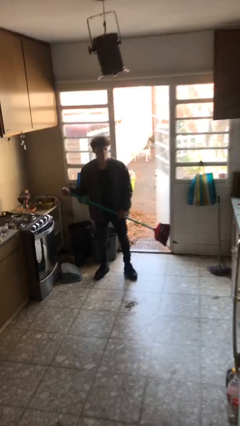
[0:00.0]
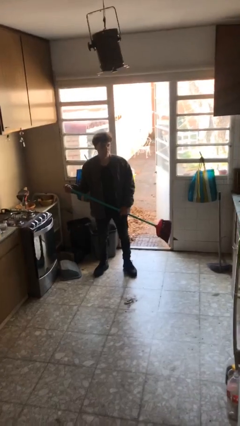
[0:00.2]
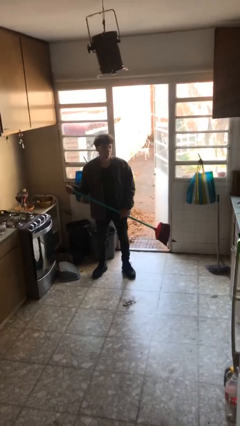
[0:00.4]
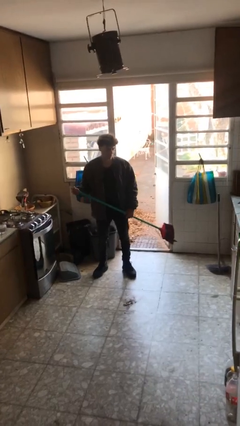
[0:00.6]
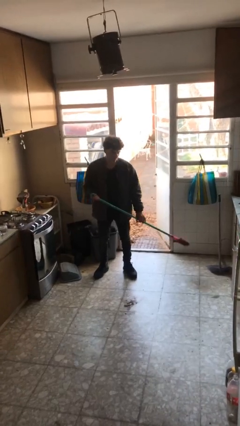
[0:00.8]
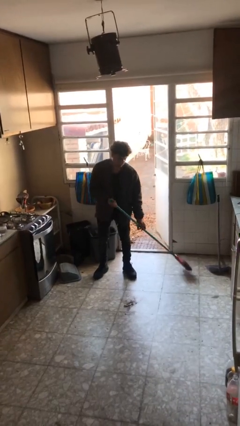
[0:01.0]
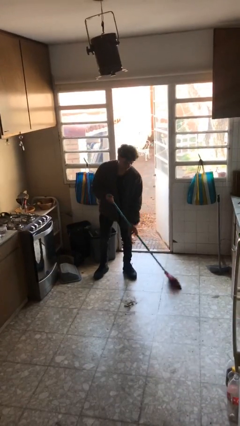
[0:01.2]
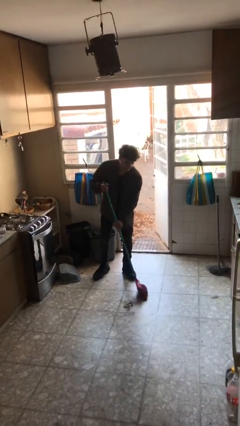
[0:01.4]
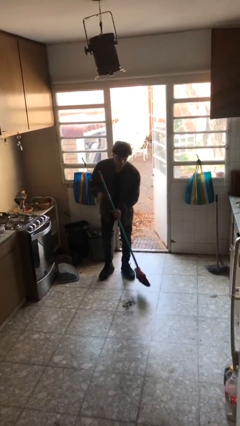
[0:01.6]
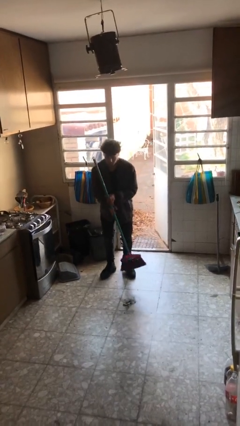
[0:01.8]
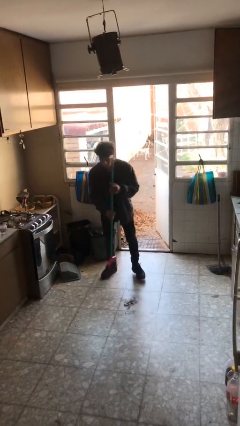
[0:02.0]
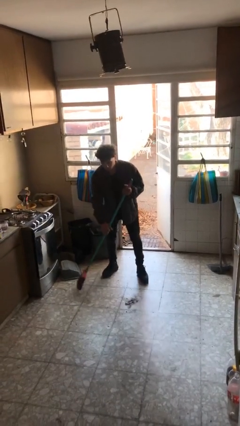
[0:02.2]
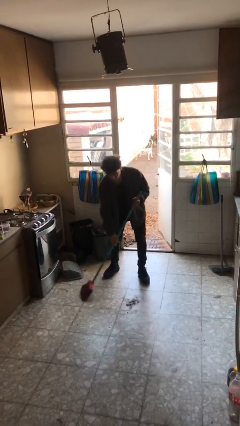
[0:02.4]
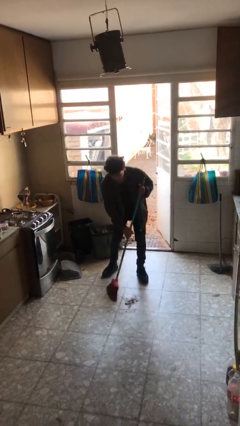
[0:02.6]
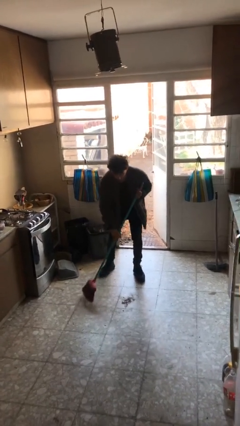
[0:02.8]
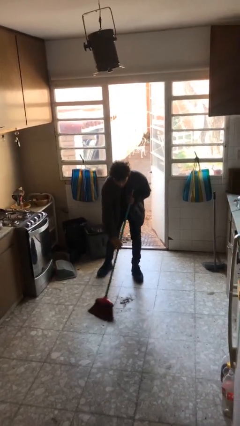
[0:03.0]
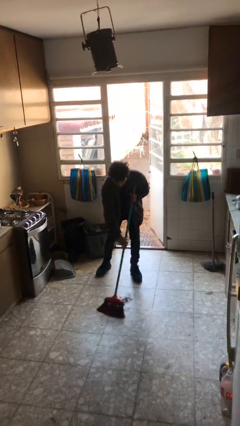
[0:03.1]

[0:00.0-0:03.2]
person sweeps floor

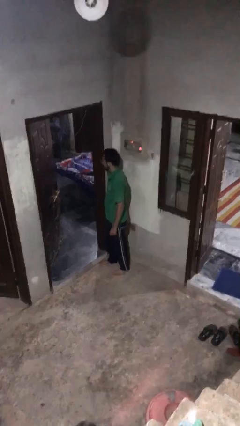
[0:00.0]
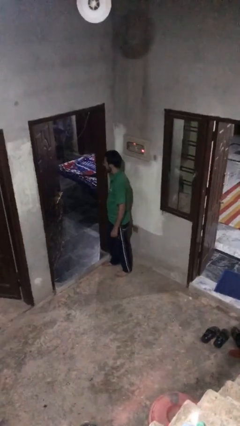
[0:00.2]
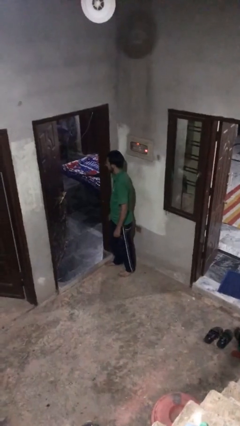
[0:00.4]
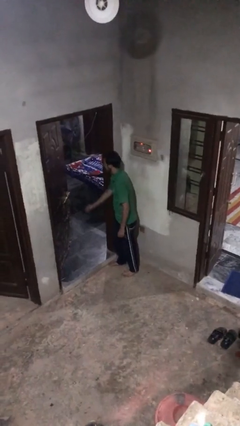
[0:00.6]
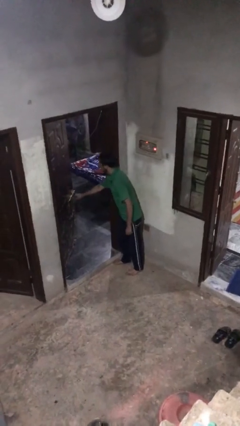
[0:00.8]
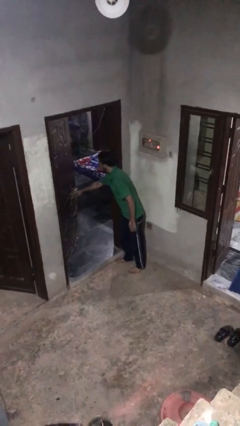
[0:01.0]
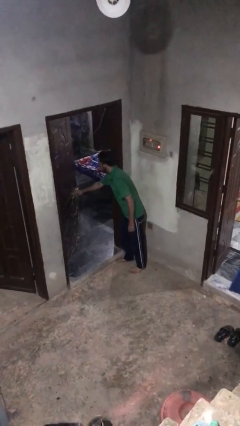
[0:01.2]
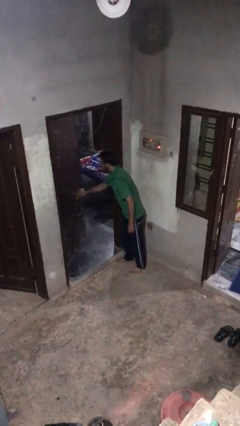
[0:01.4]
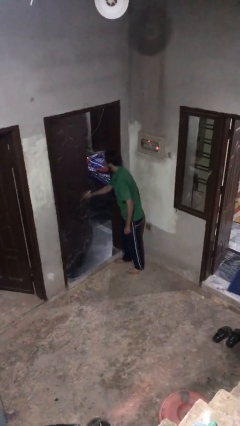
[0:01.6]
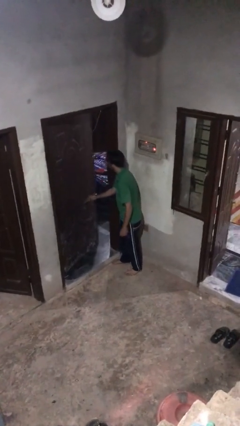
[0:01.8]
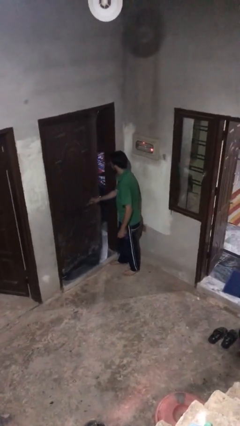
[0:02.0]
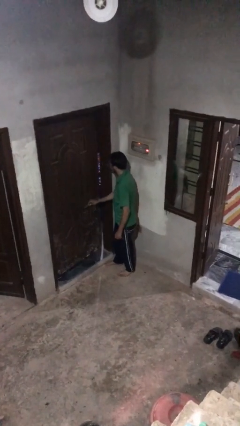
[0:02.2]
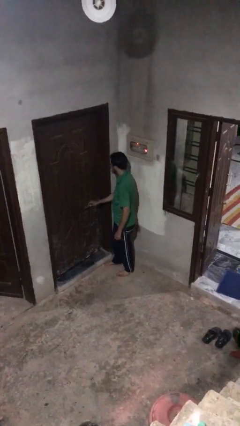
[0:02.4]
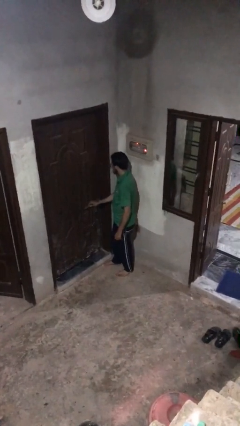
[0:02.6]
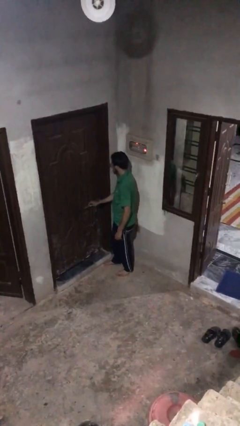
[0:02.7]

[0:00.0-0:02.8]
person closes facility door

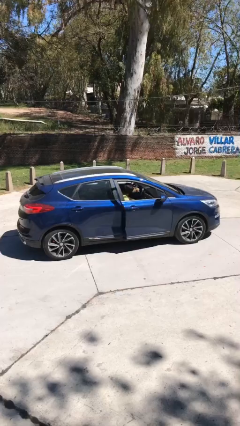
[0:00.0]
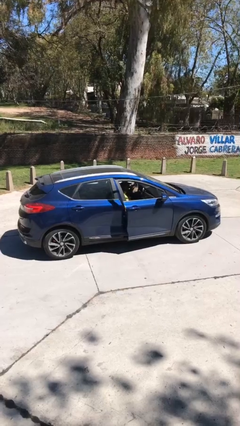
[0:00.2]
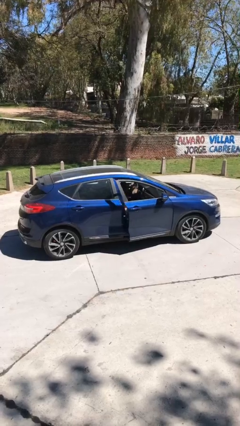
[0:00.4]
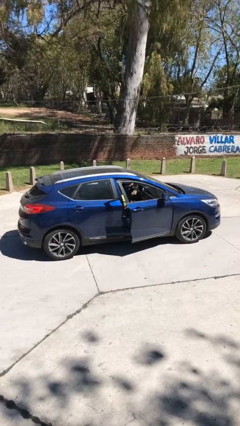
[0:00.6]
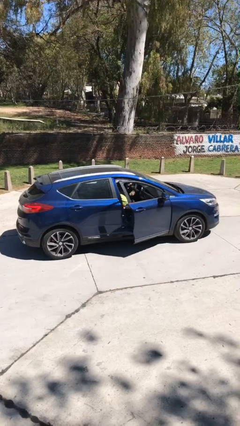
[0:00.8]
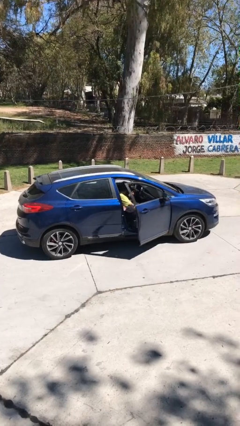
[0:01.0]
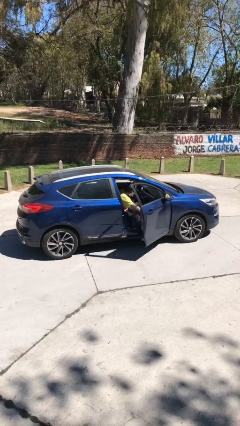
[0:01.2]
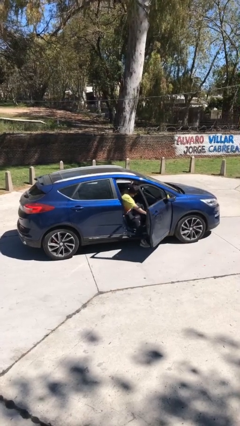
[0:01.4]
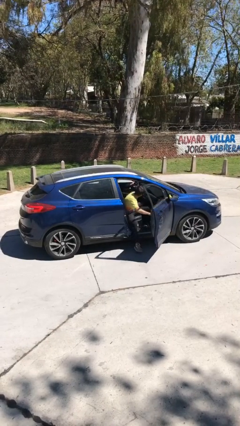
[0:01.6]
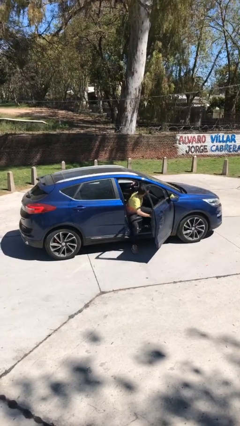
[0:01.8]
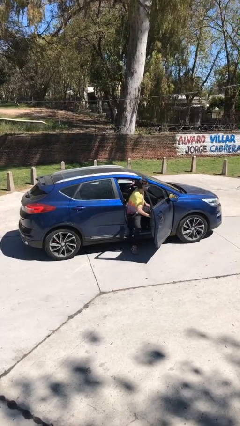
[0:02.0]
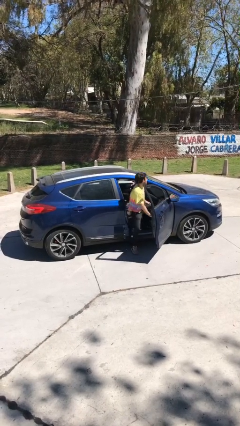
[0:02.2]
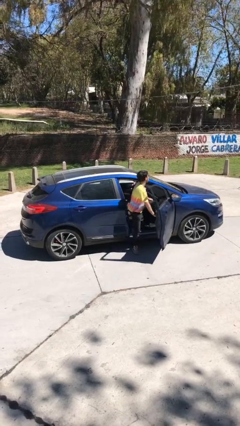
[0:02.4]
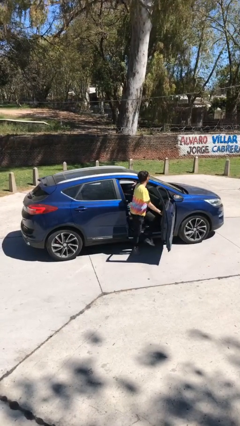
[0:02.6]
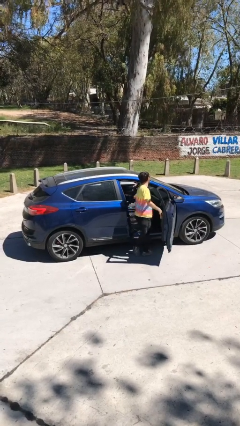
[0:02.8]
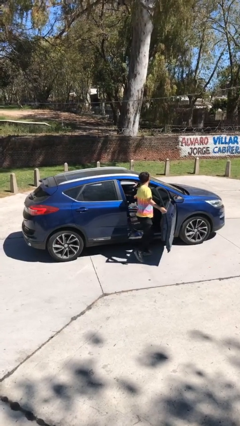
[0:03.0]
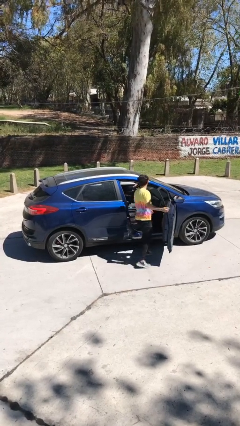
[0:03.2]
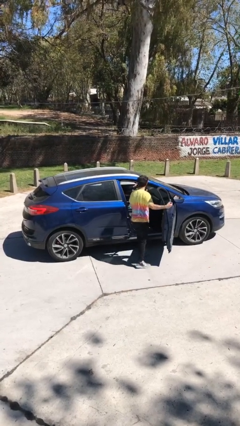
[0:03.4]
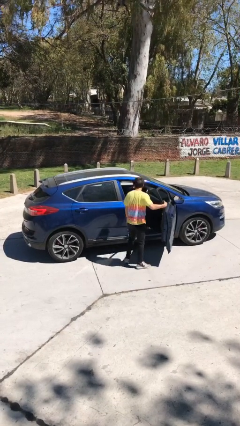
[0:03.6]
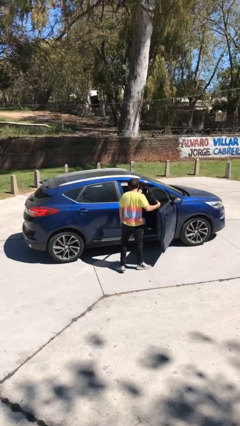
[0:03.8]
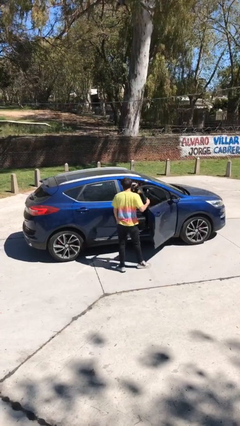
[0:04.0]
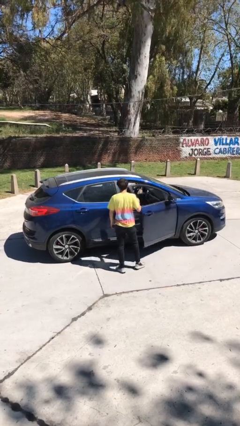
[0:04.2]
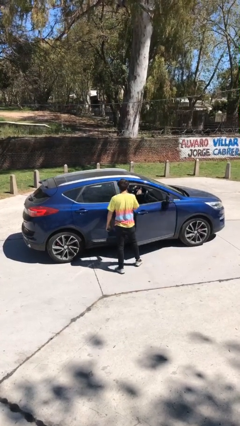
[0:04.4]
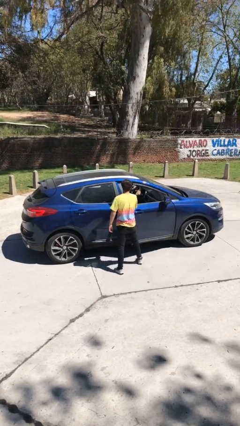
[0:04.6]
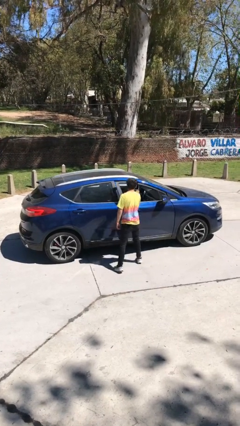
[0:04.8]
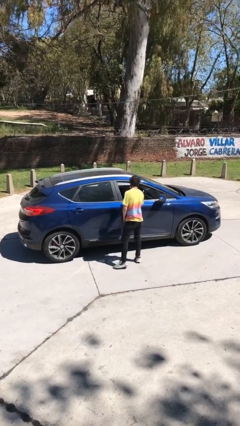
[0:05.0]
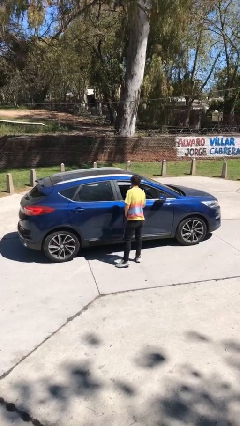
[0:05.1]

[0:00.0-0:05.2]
car drops off person

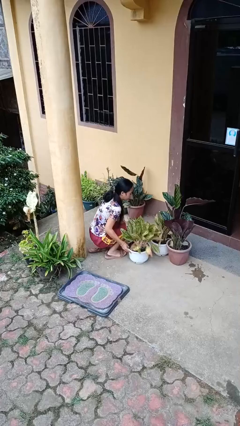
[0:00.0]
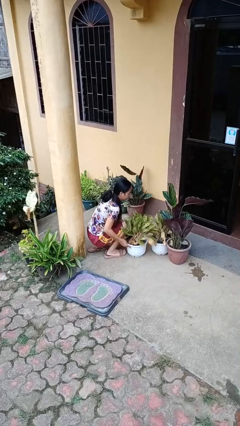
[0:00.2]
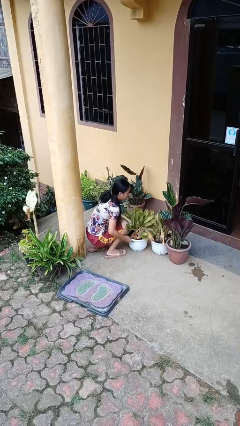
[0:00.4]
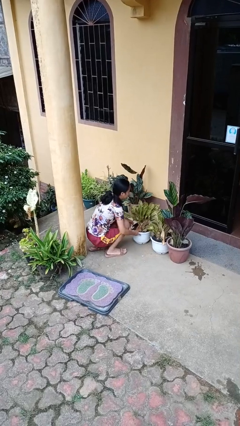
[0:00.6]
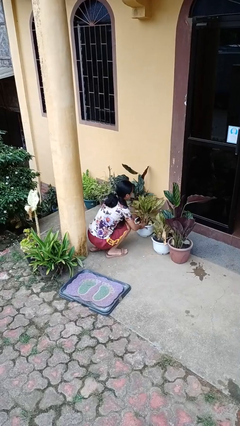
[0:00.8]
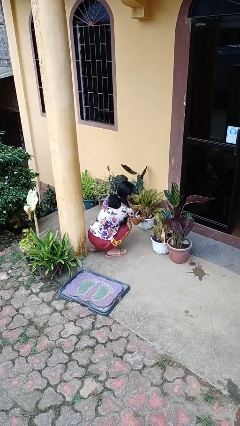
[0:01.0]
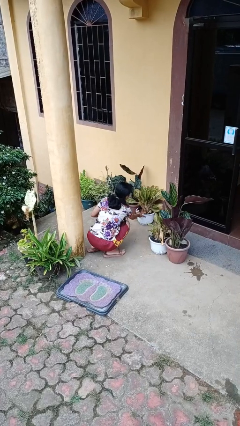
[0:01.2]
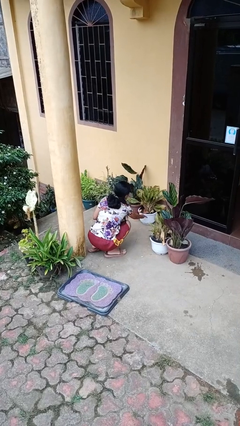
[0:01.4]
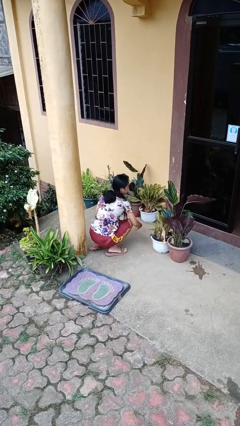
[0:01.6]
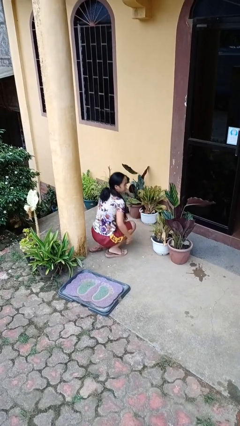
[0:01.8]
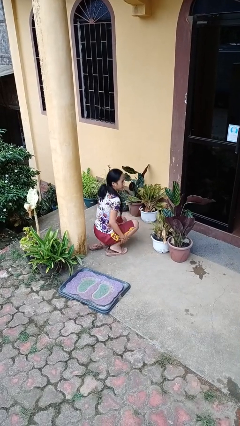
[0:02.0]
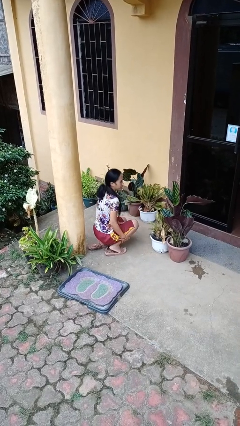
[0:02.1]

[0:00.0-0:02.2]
person arranges flowers in vase

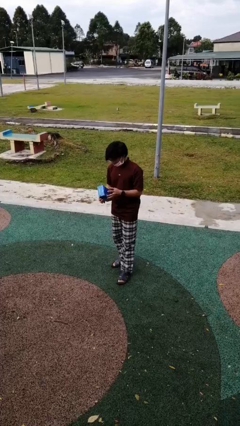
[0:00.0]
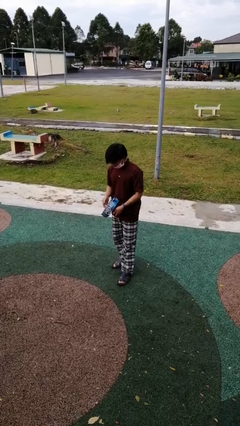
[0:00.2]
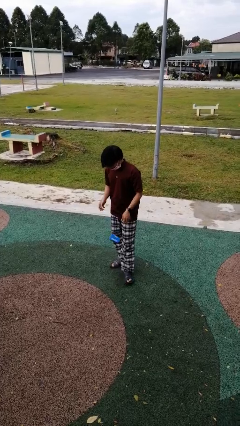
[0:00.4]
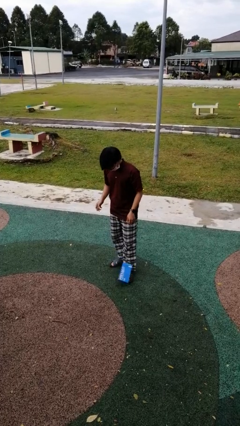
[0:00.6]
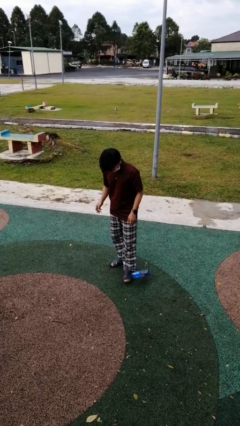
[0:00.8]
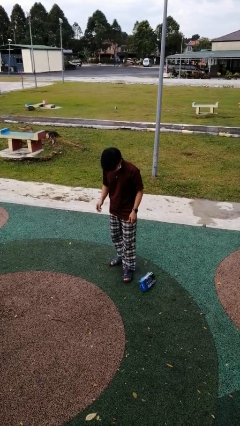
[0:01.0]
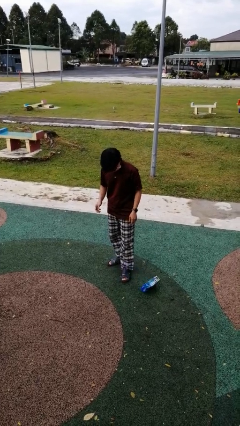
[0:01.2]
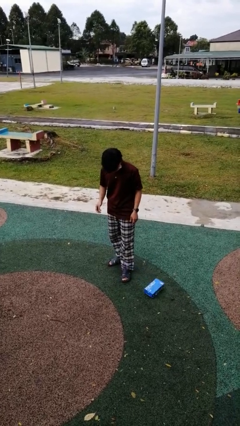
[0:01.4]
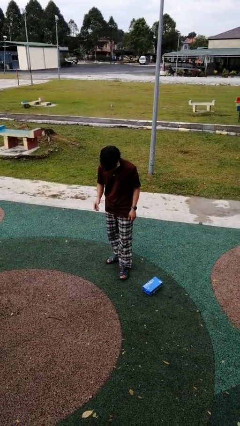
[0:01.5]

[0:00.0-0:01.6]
person drops object

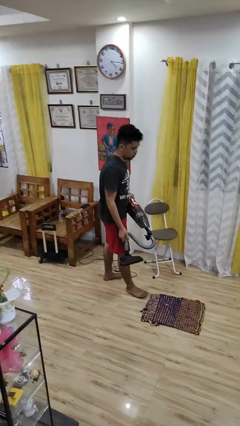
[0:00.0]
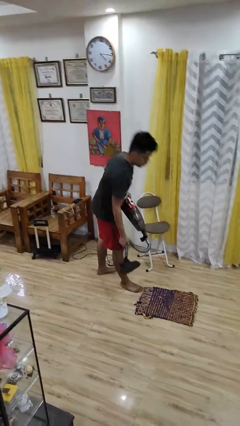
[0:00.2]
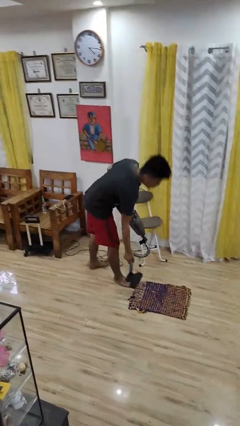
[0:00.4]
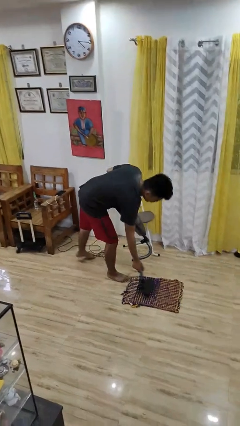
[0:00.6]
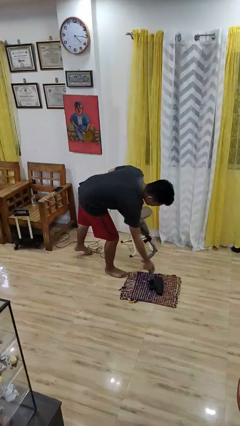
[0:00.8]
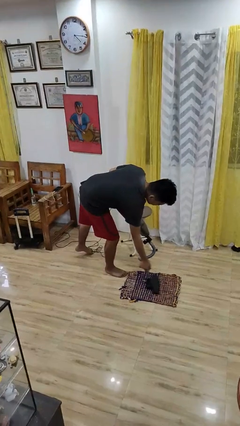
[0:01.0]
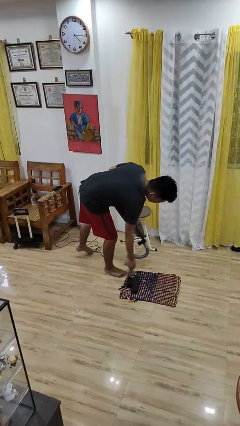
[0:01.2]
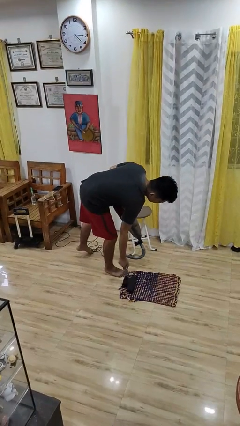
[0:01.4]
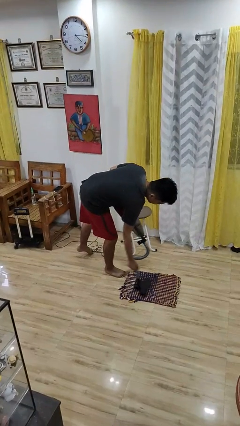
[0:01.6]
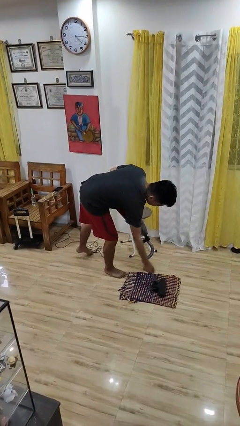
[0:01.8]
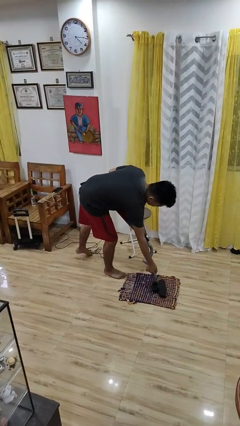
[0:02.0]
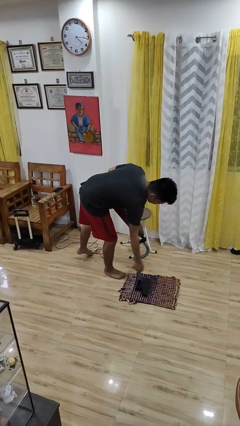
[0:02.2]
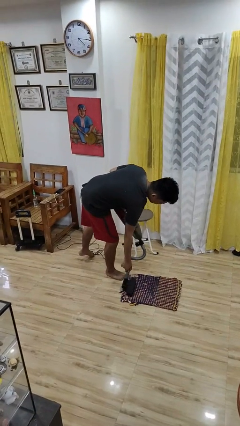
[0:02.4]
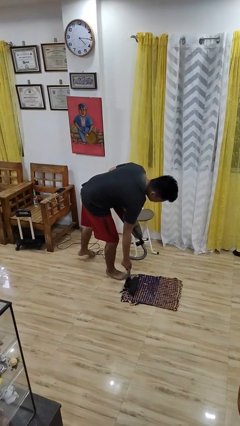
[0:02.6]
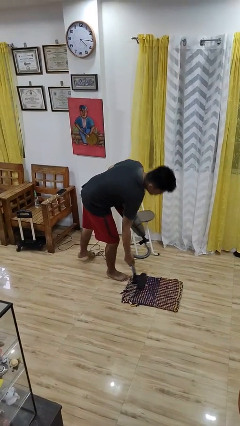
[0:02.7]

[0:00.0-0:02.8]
person vacuums carpet
